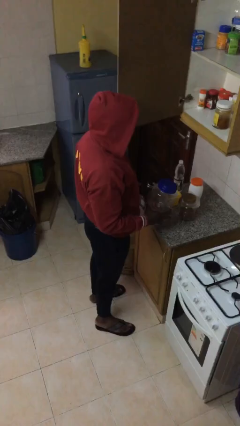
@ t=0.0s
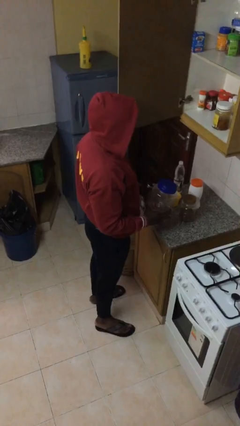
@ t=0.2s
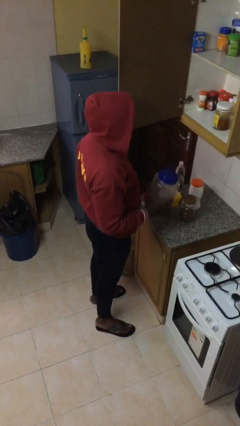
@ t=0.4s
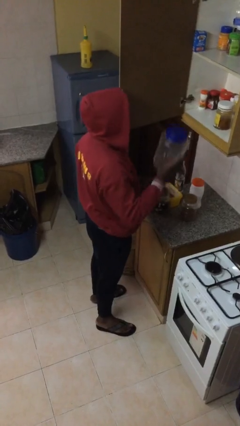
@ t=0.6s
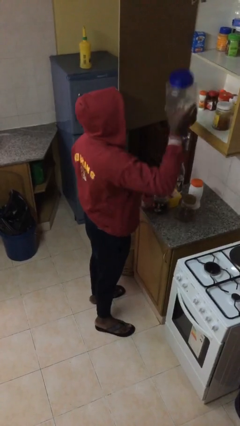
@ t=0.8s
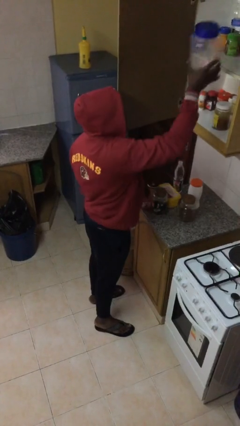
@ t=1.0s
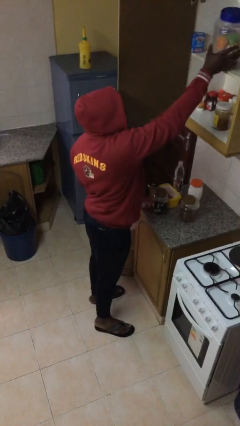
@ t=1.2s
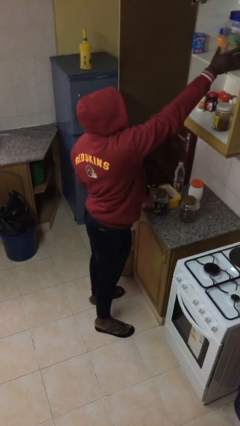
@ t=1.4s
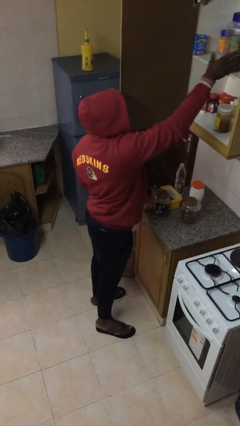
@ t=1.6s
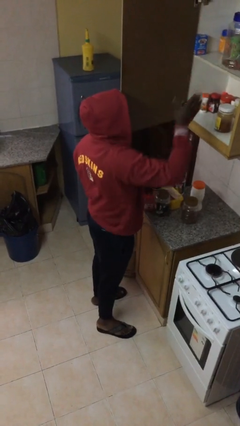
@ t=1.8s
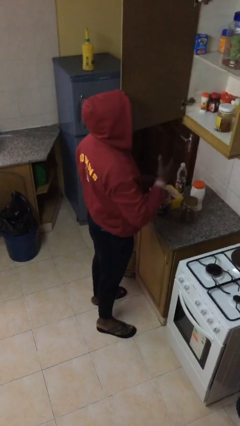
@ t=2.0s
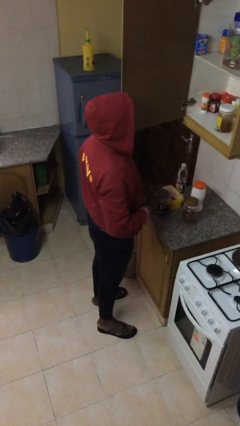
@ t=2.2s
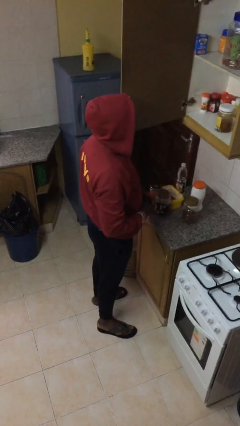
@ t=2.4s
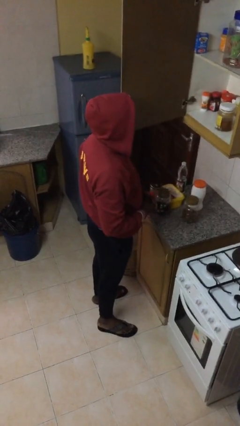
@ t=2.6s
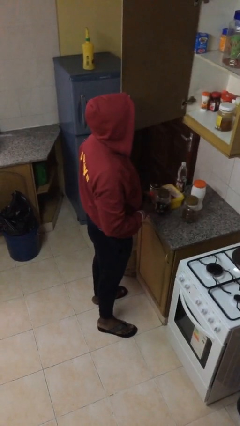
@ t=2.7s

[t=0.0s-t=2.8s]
person puts down object on shelf

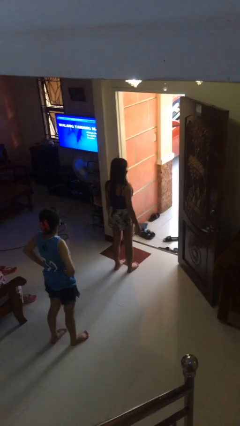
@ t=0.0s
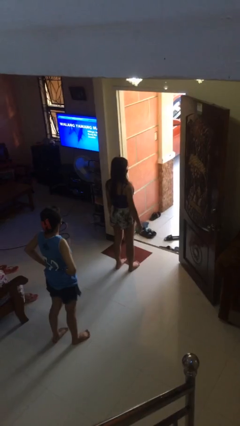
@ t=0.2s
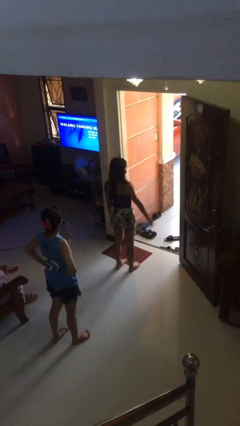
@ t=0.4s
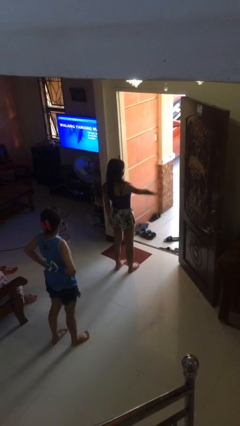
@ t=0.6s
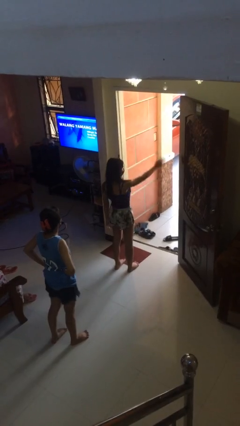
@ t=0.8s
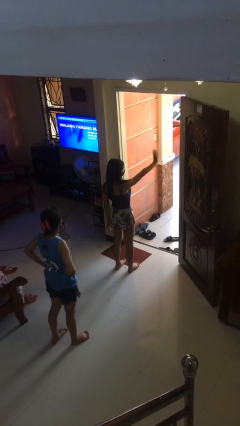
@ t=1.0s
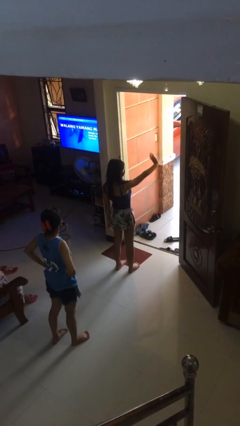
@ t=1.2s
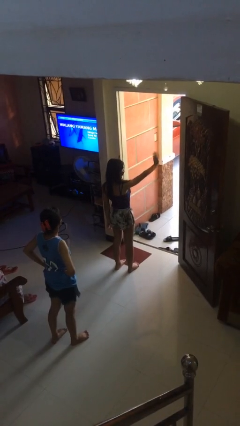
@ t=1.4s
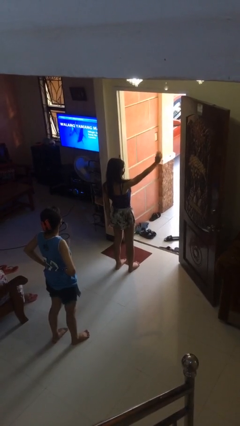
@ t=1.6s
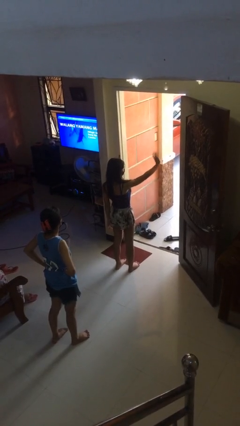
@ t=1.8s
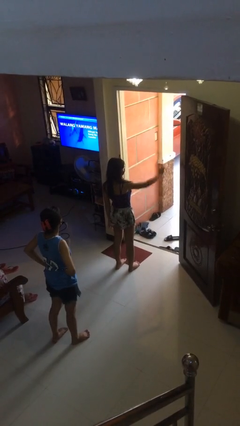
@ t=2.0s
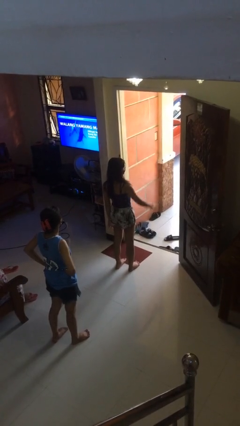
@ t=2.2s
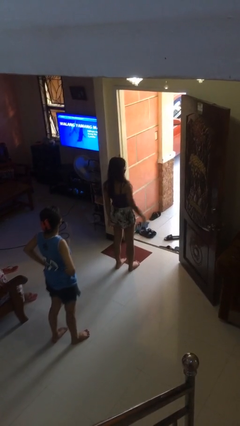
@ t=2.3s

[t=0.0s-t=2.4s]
person waves at person

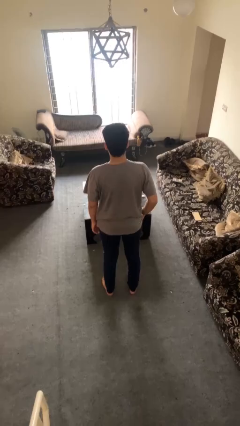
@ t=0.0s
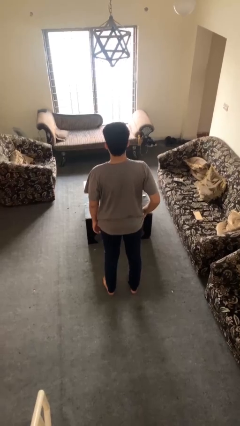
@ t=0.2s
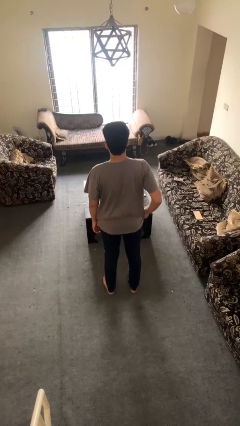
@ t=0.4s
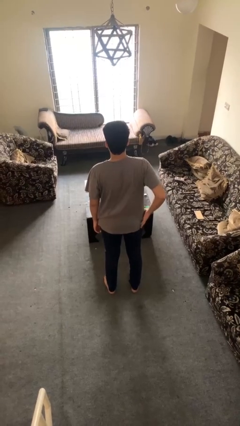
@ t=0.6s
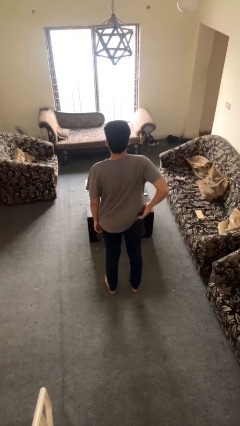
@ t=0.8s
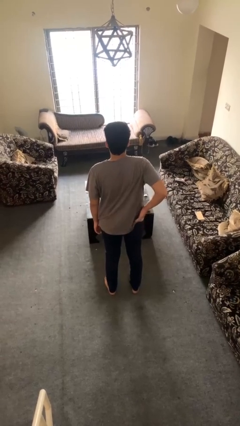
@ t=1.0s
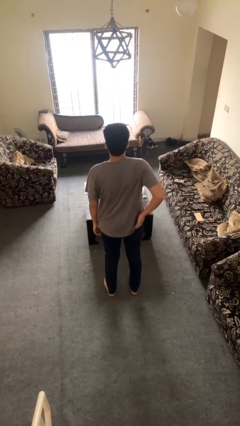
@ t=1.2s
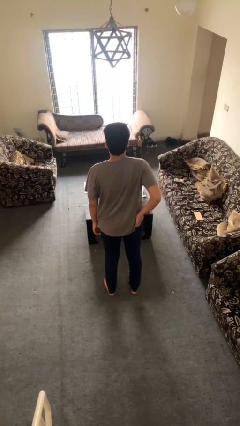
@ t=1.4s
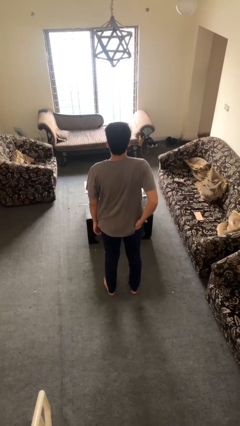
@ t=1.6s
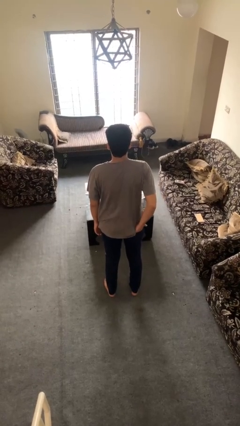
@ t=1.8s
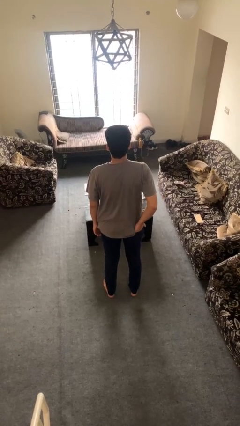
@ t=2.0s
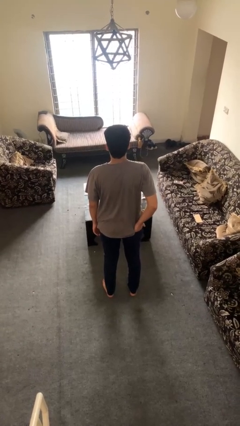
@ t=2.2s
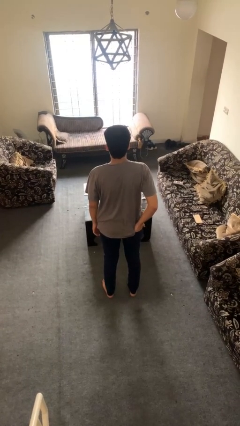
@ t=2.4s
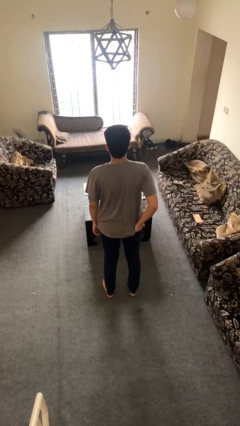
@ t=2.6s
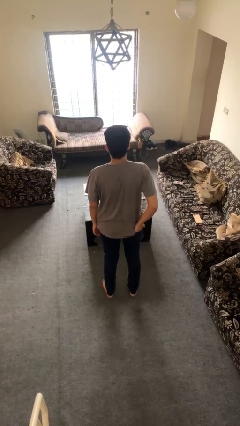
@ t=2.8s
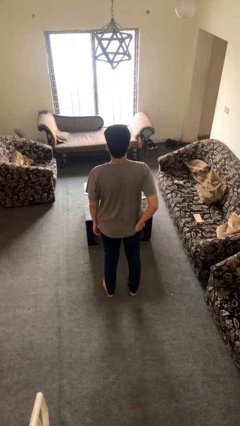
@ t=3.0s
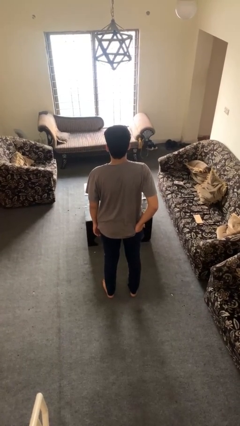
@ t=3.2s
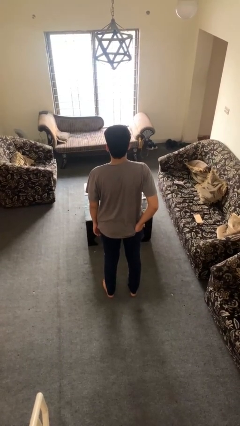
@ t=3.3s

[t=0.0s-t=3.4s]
person puts hands in back pockets

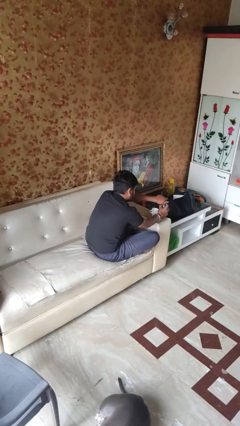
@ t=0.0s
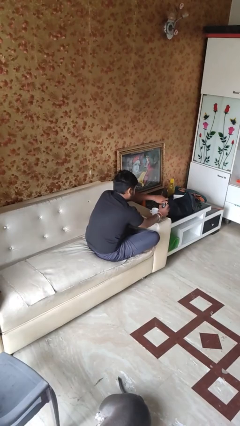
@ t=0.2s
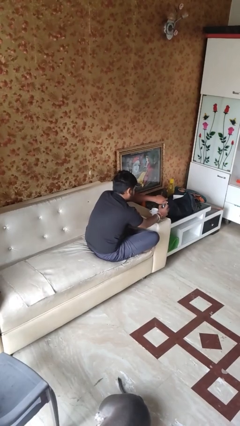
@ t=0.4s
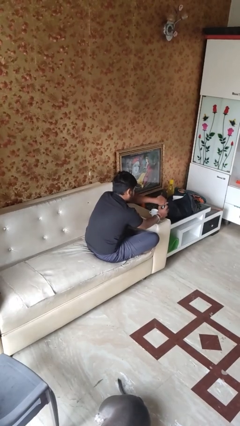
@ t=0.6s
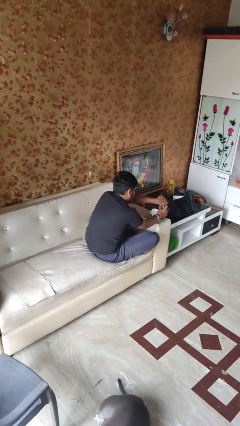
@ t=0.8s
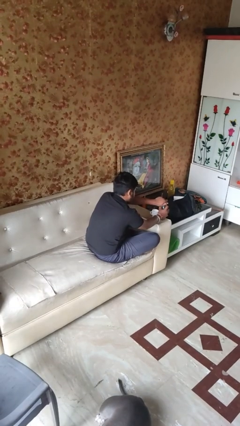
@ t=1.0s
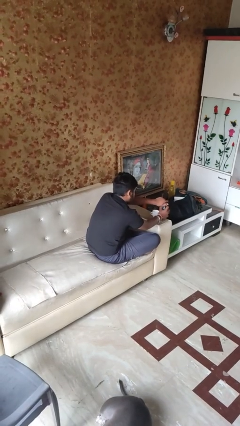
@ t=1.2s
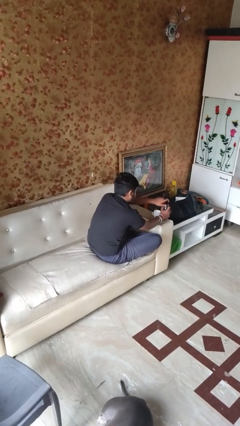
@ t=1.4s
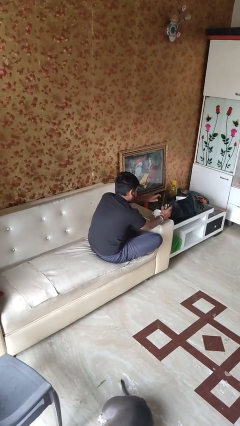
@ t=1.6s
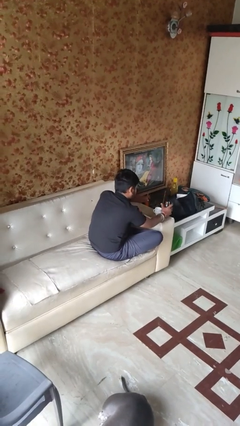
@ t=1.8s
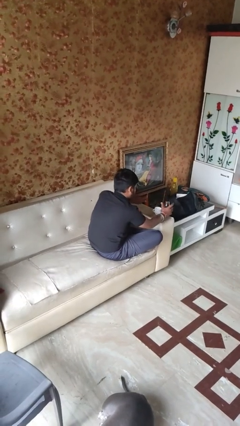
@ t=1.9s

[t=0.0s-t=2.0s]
person screws lid to bottle

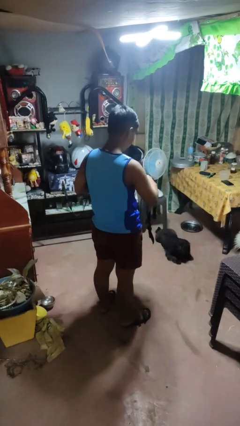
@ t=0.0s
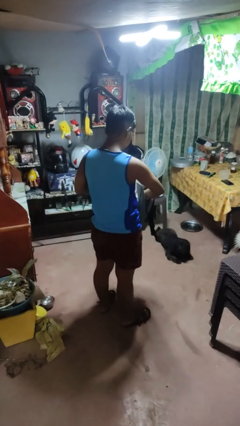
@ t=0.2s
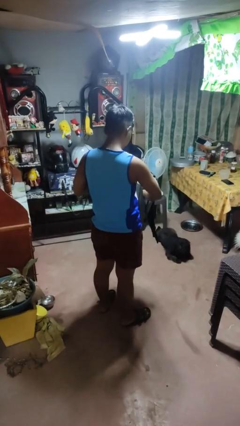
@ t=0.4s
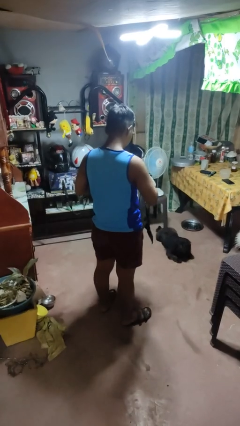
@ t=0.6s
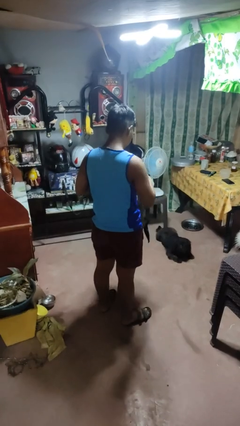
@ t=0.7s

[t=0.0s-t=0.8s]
person puts object into bag

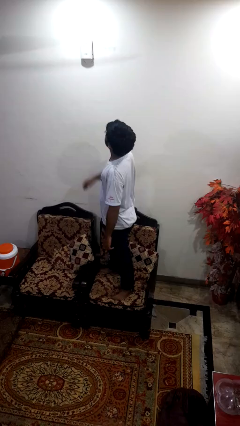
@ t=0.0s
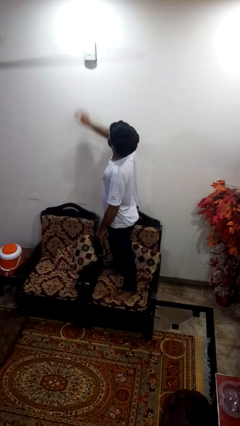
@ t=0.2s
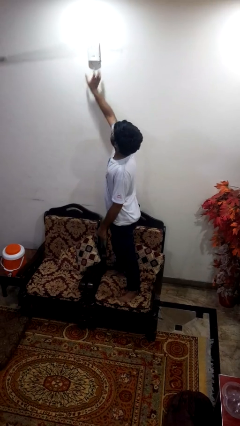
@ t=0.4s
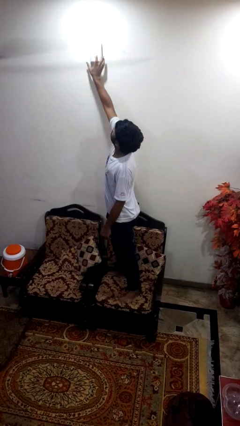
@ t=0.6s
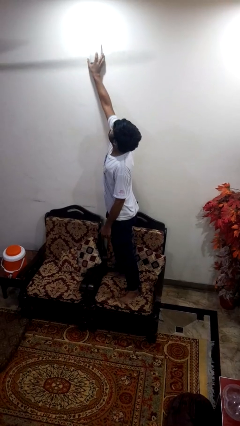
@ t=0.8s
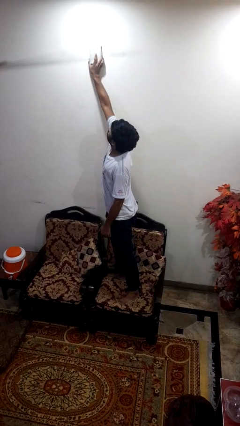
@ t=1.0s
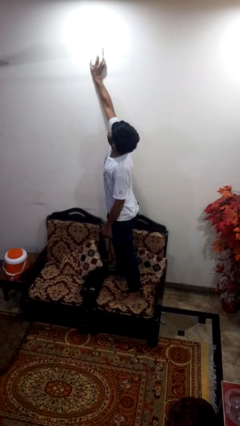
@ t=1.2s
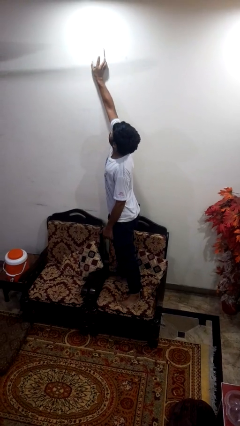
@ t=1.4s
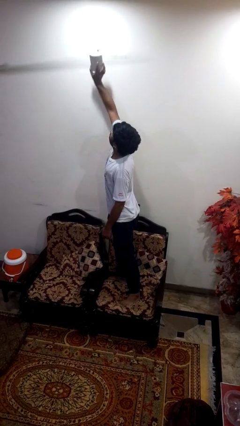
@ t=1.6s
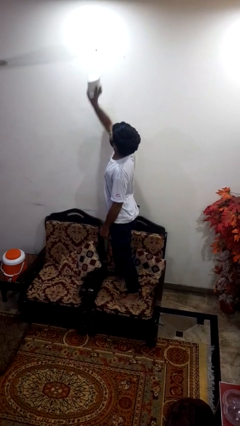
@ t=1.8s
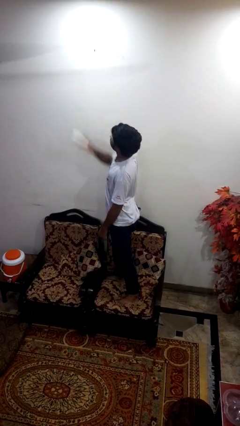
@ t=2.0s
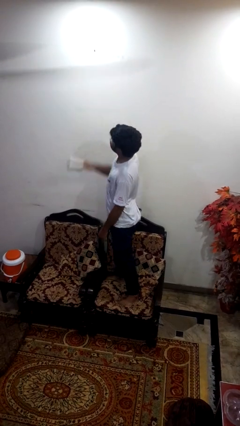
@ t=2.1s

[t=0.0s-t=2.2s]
person takes down smoke detector

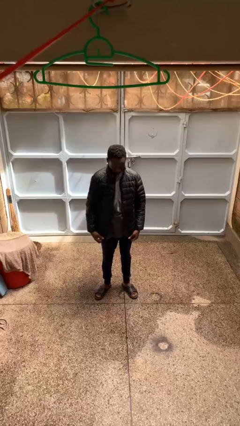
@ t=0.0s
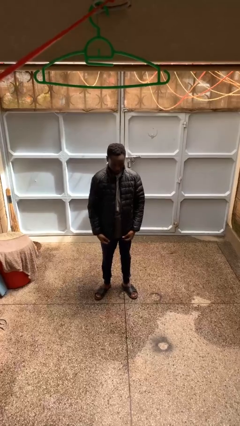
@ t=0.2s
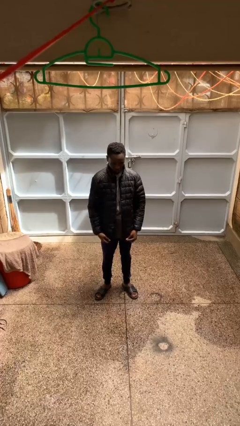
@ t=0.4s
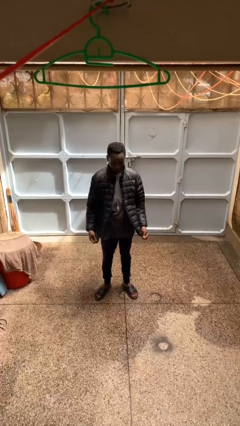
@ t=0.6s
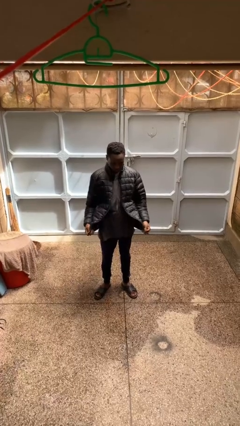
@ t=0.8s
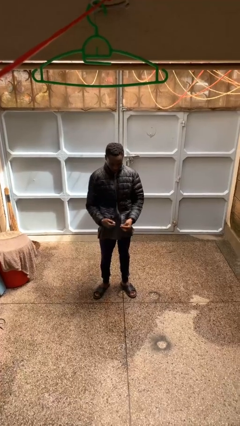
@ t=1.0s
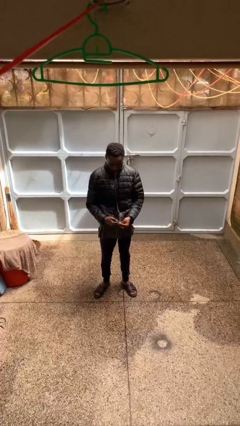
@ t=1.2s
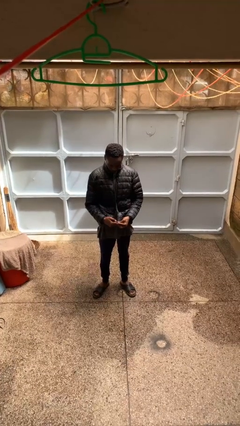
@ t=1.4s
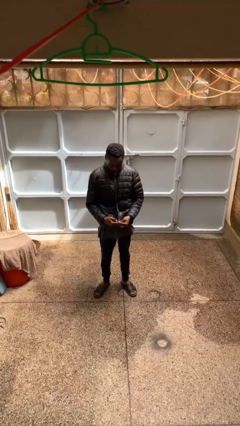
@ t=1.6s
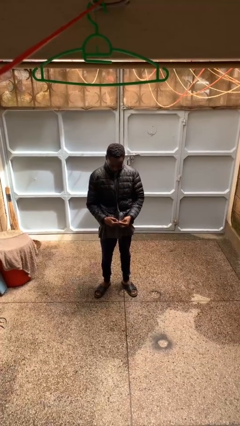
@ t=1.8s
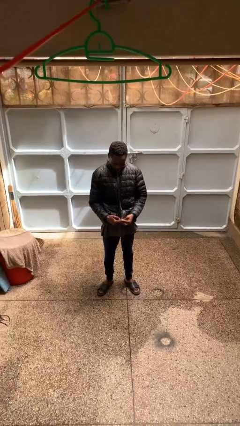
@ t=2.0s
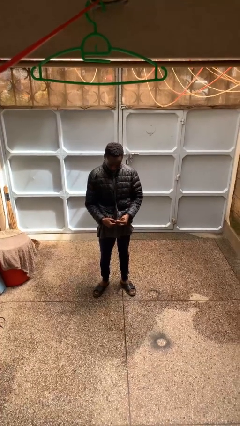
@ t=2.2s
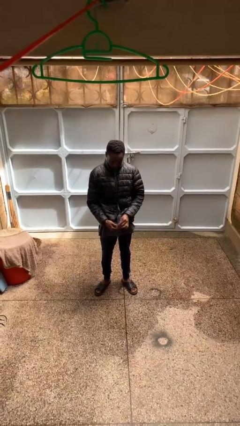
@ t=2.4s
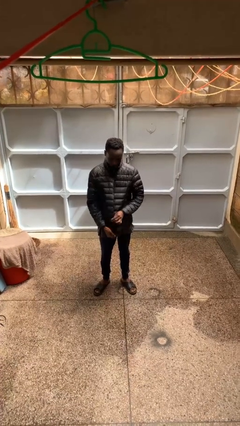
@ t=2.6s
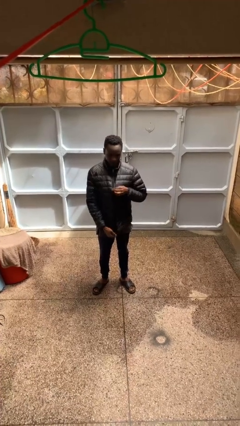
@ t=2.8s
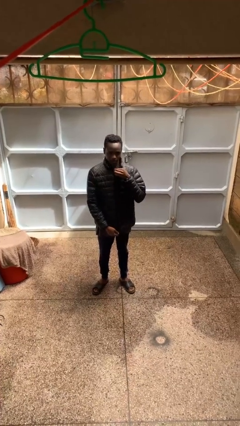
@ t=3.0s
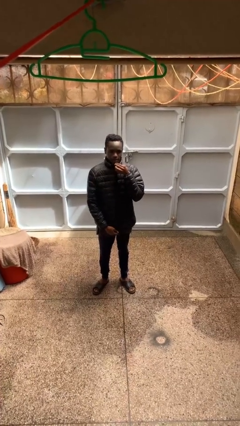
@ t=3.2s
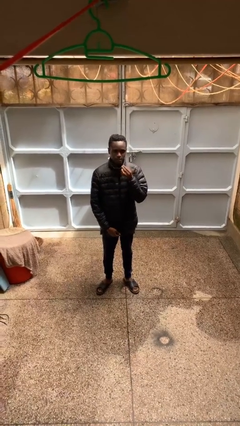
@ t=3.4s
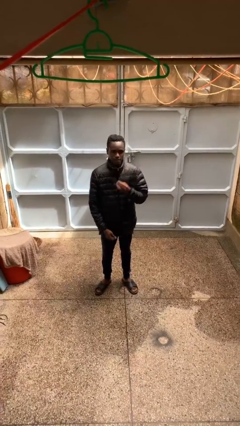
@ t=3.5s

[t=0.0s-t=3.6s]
person zips up jacket
